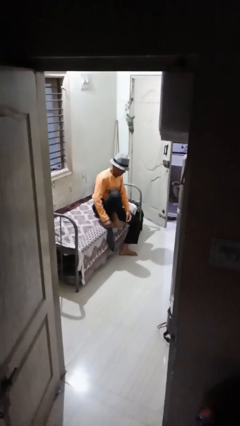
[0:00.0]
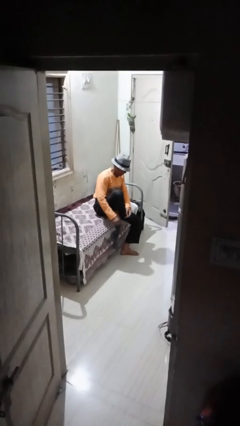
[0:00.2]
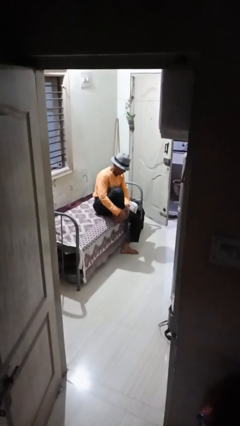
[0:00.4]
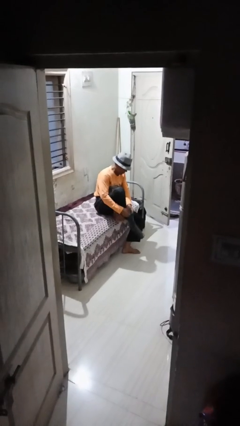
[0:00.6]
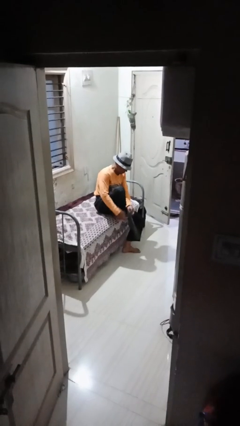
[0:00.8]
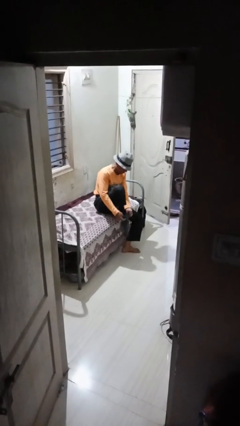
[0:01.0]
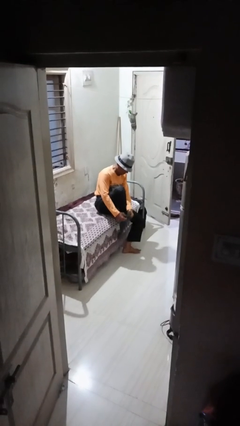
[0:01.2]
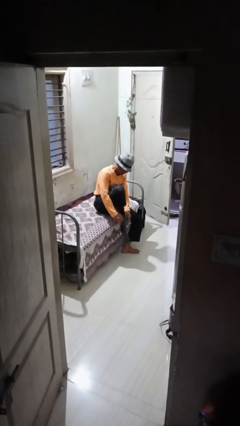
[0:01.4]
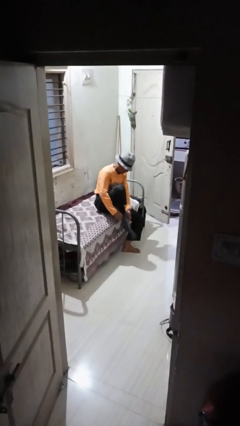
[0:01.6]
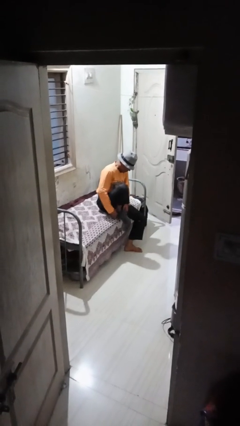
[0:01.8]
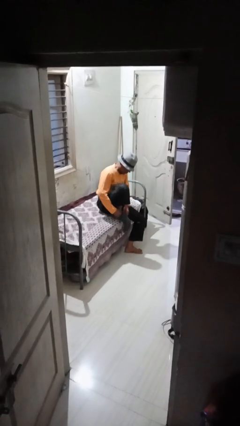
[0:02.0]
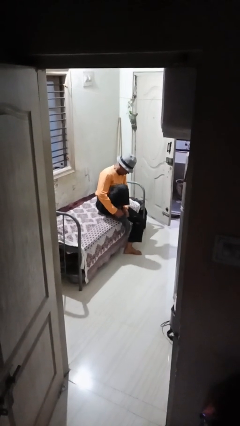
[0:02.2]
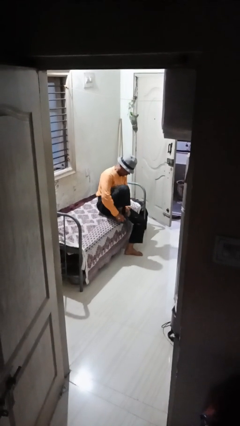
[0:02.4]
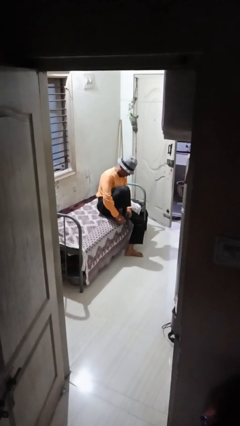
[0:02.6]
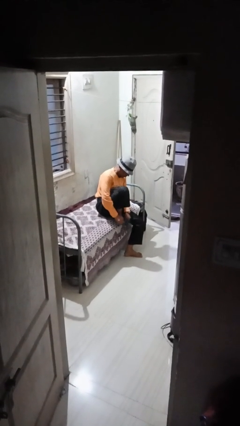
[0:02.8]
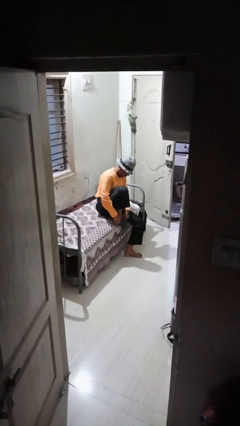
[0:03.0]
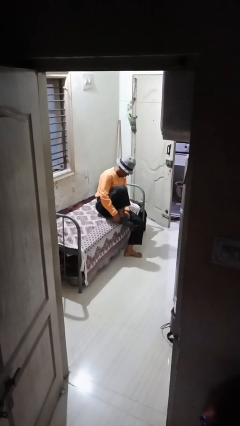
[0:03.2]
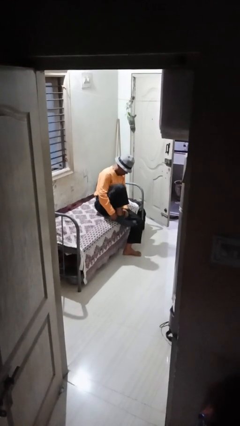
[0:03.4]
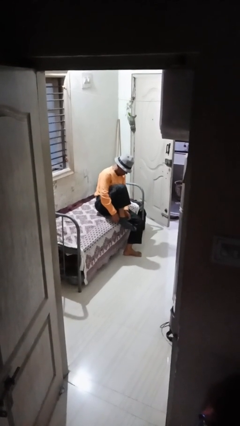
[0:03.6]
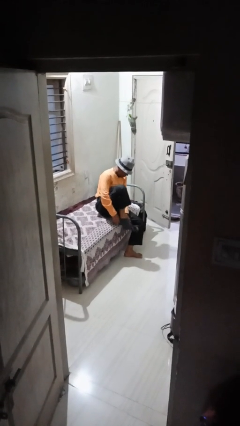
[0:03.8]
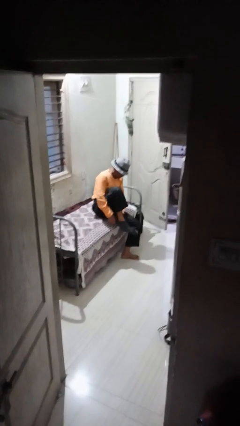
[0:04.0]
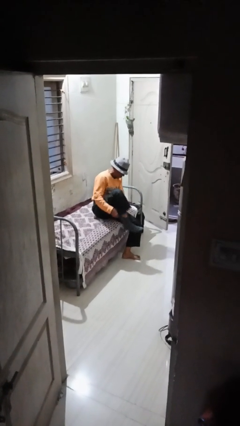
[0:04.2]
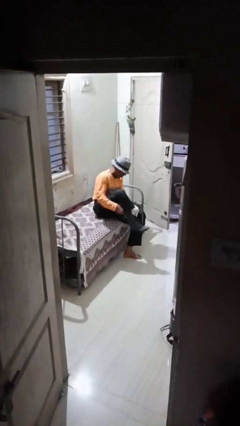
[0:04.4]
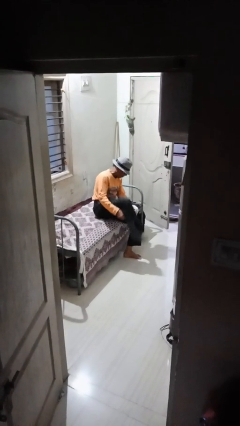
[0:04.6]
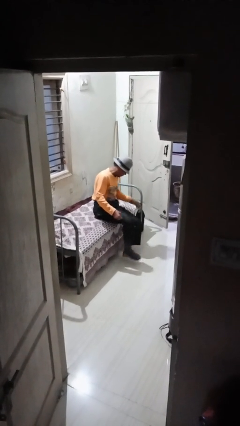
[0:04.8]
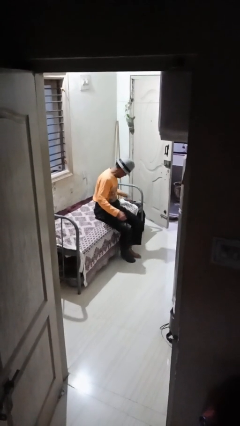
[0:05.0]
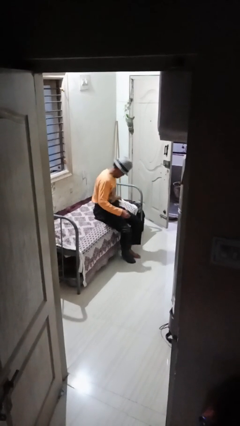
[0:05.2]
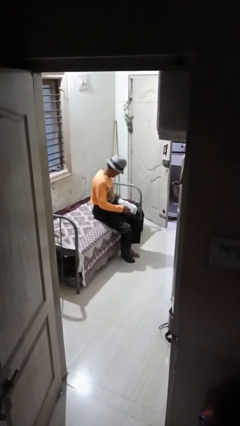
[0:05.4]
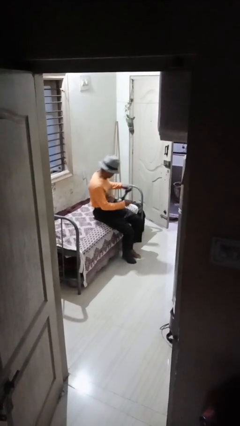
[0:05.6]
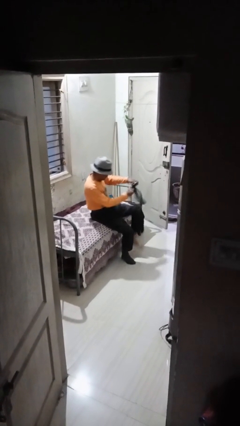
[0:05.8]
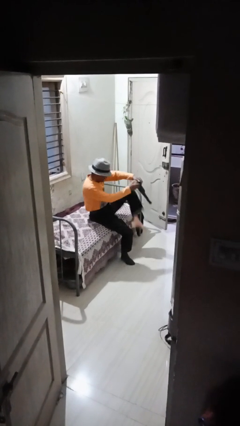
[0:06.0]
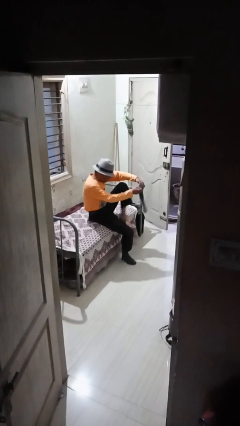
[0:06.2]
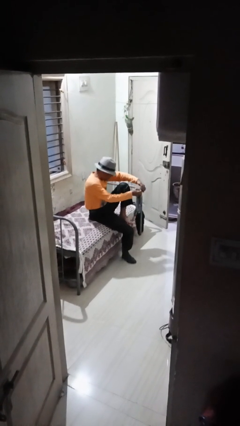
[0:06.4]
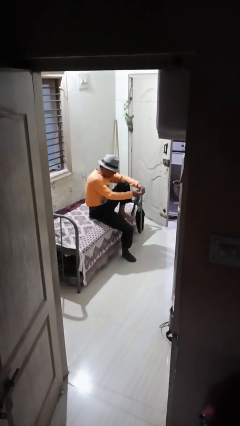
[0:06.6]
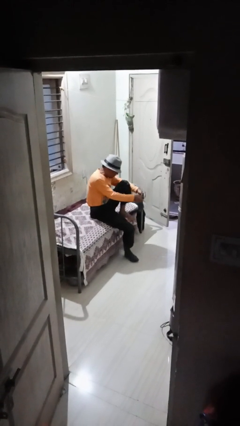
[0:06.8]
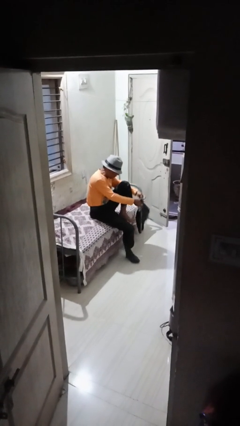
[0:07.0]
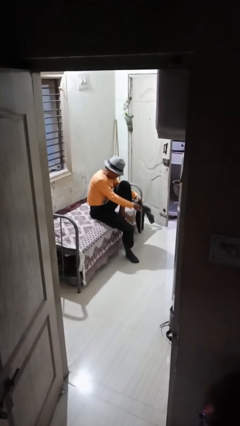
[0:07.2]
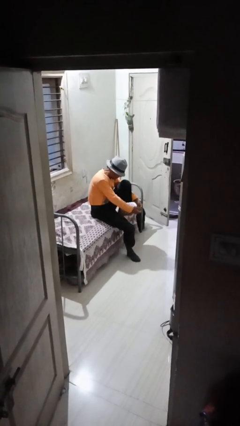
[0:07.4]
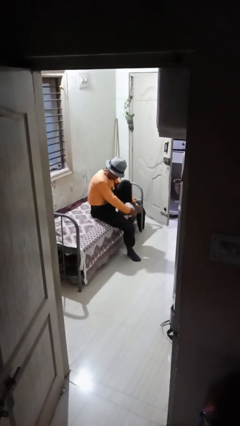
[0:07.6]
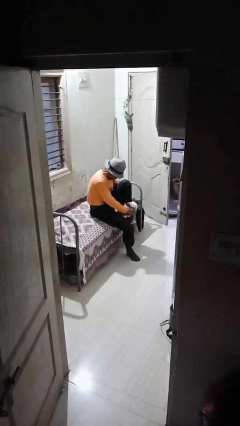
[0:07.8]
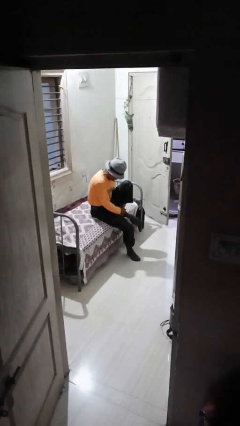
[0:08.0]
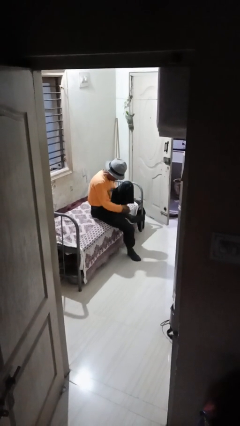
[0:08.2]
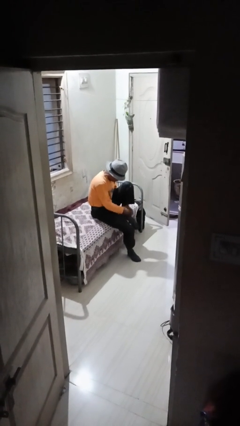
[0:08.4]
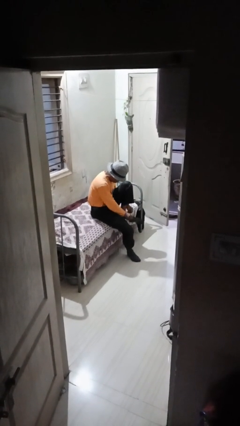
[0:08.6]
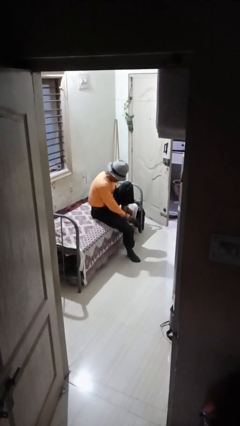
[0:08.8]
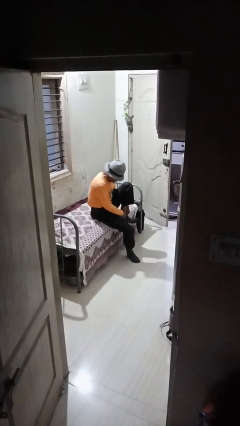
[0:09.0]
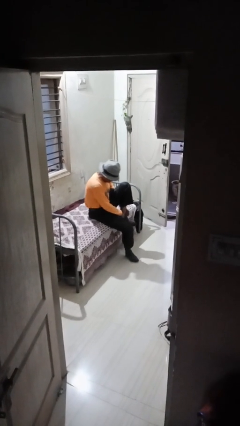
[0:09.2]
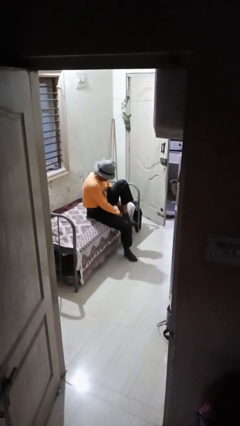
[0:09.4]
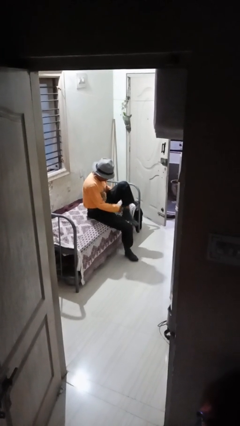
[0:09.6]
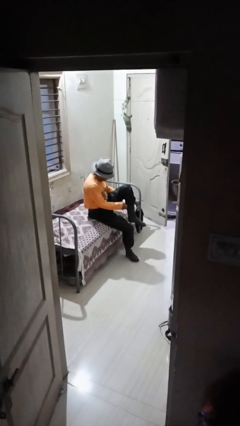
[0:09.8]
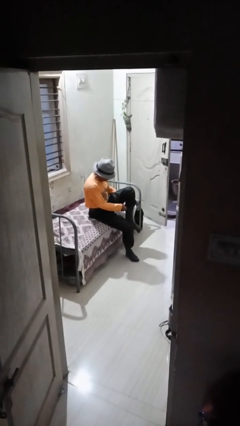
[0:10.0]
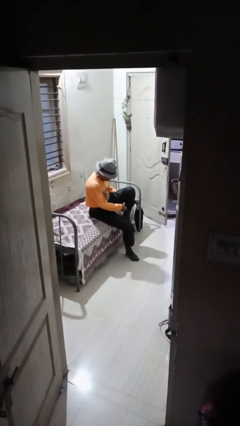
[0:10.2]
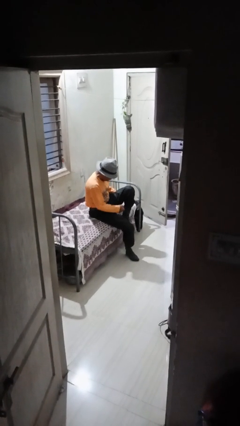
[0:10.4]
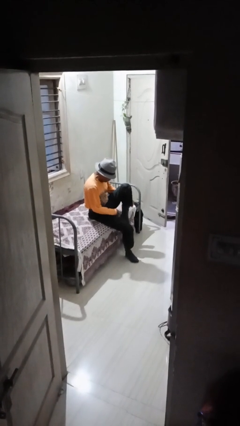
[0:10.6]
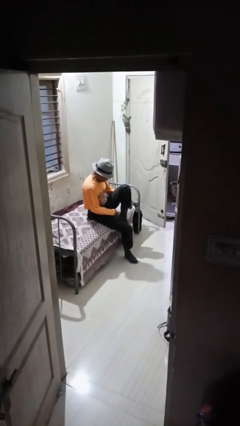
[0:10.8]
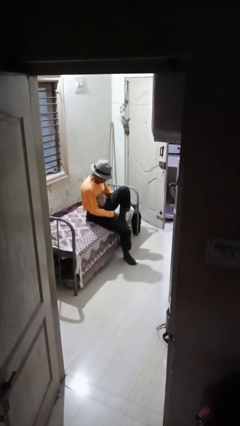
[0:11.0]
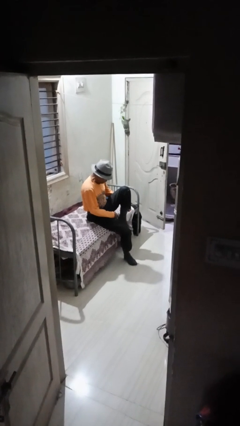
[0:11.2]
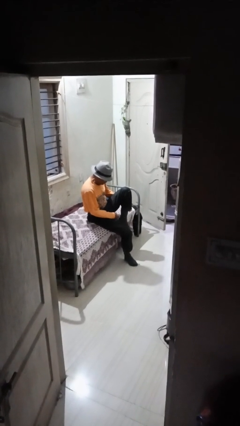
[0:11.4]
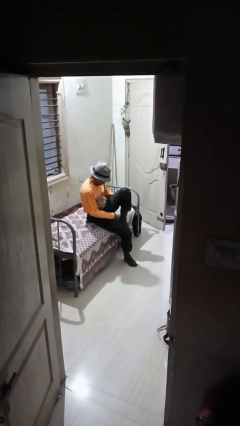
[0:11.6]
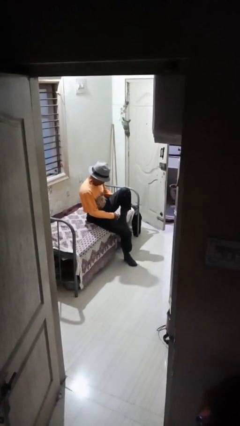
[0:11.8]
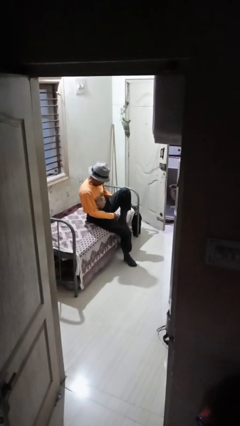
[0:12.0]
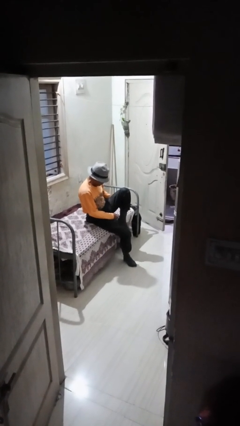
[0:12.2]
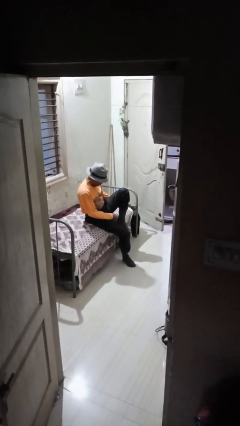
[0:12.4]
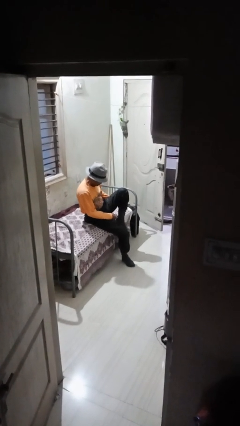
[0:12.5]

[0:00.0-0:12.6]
person puts on socks

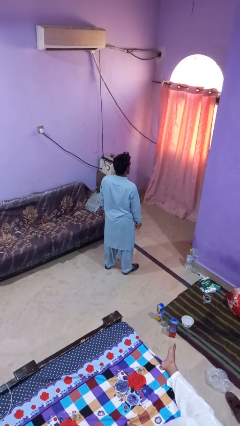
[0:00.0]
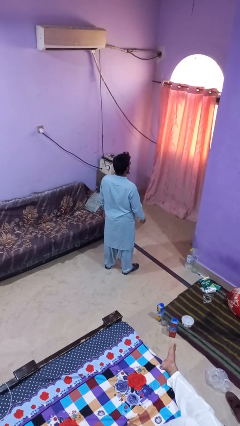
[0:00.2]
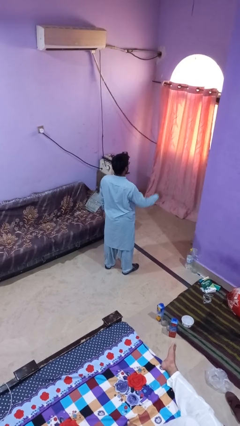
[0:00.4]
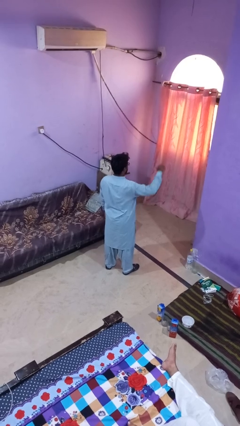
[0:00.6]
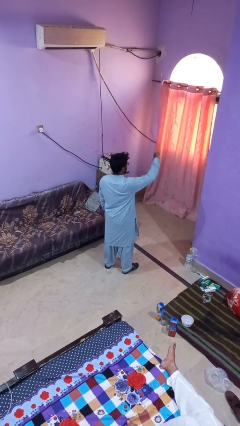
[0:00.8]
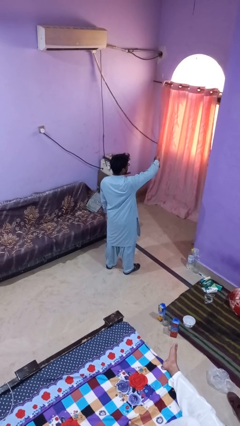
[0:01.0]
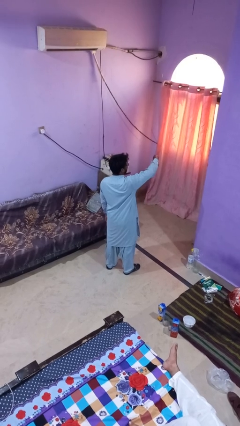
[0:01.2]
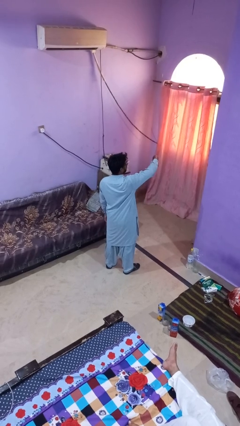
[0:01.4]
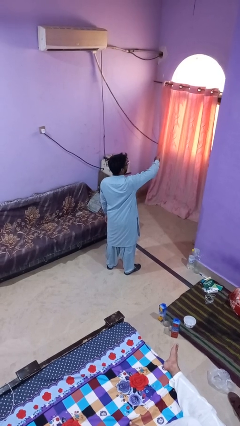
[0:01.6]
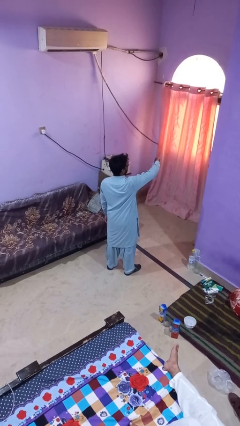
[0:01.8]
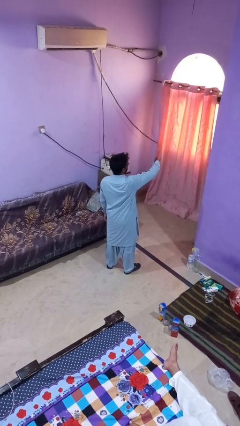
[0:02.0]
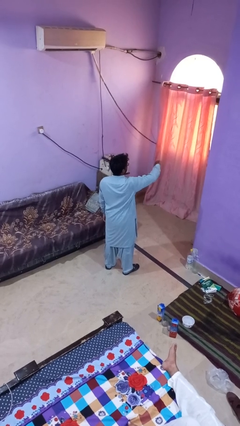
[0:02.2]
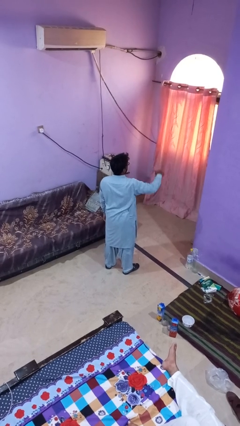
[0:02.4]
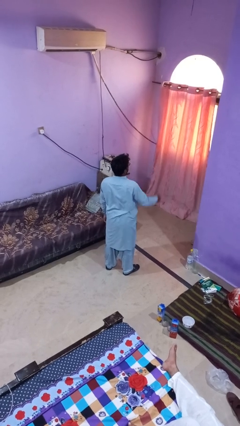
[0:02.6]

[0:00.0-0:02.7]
person gestures thumbs down

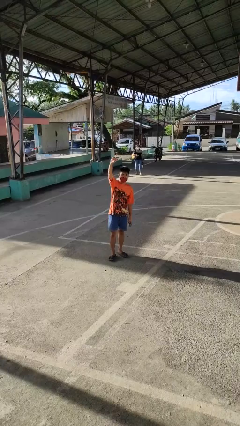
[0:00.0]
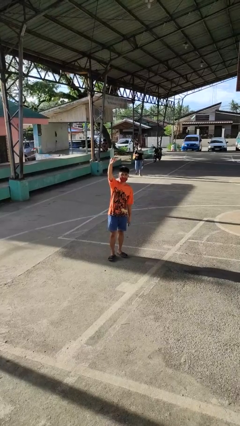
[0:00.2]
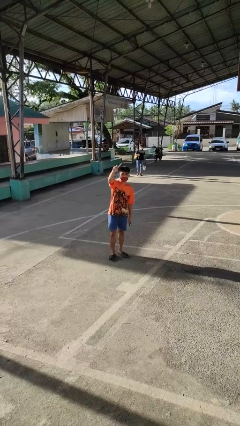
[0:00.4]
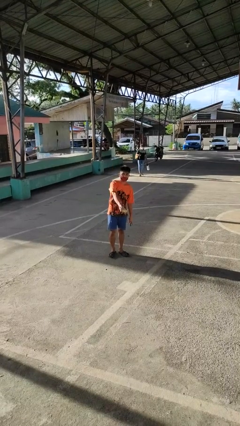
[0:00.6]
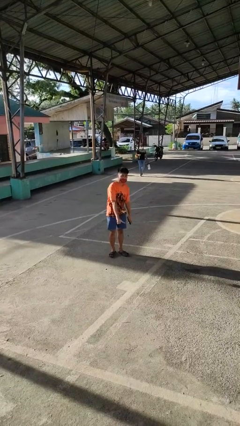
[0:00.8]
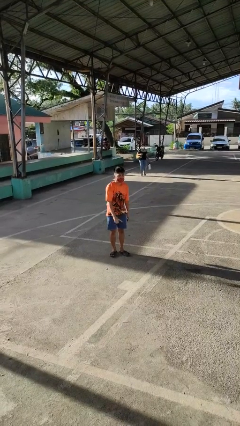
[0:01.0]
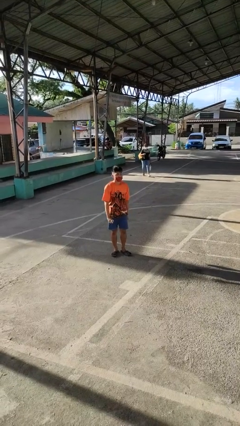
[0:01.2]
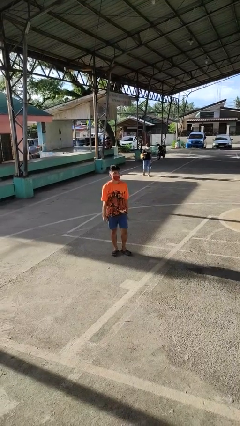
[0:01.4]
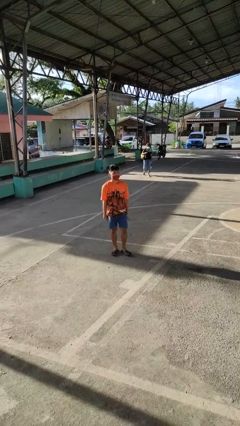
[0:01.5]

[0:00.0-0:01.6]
person gestures swipe down

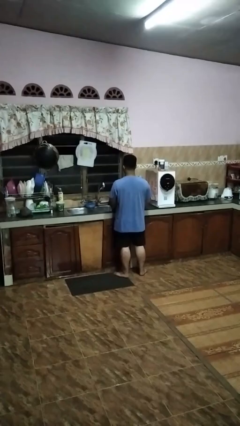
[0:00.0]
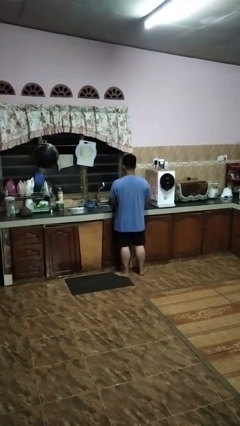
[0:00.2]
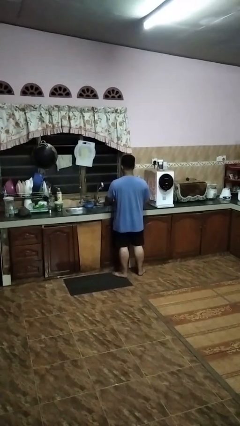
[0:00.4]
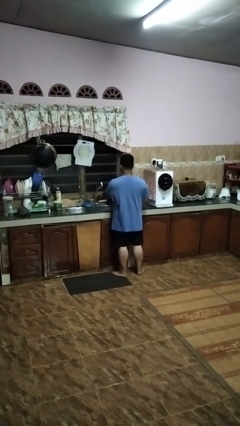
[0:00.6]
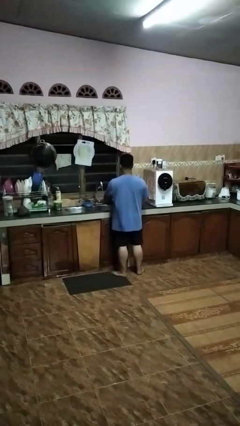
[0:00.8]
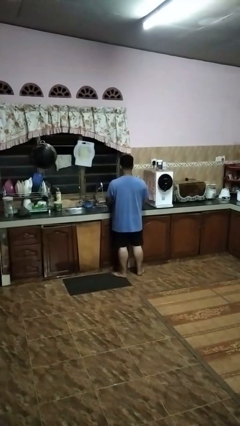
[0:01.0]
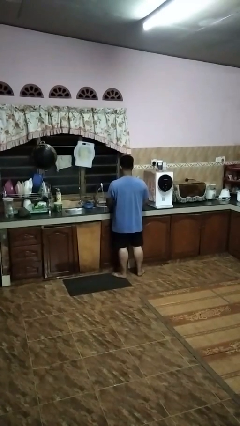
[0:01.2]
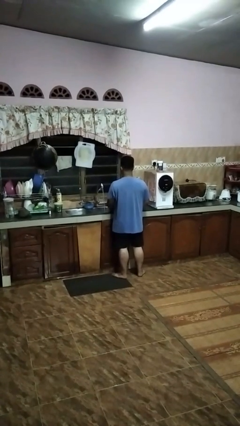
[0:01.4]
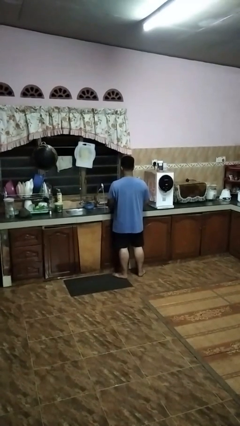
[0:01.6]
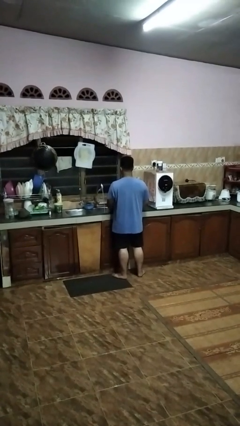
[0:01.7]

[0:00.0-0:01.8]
person turns on faucet
